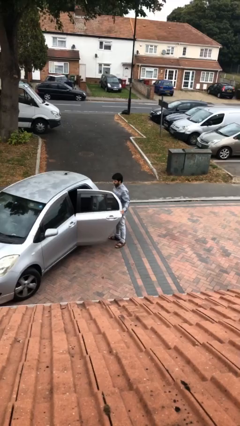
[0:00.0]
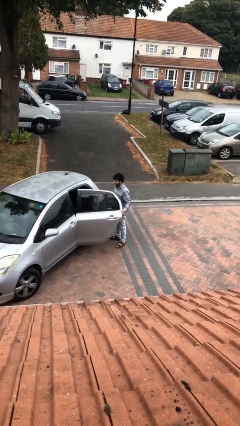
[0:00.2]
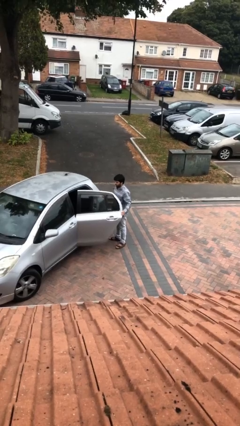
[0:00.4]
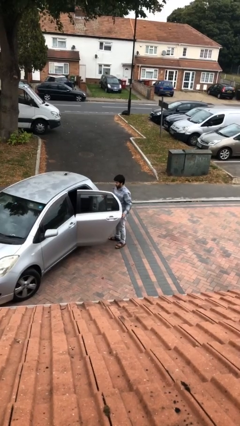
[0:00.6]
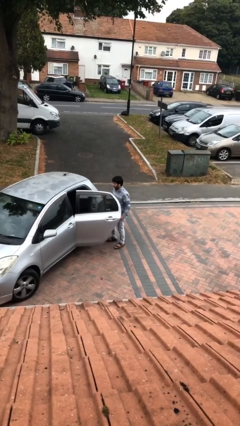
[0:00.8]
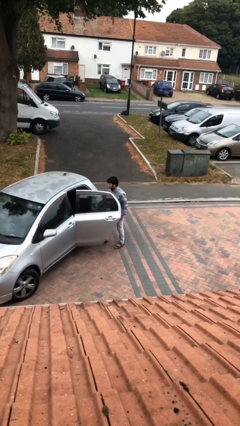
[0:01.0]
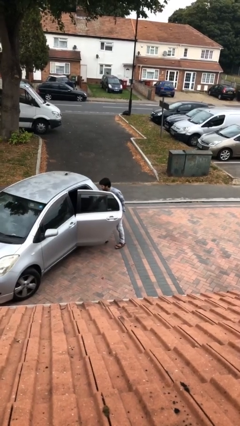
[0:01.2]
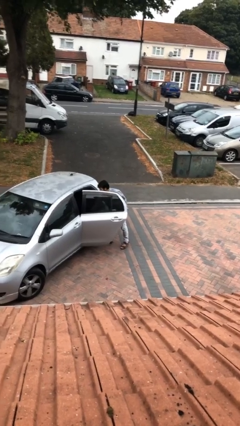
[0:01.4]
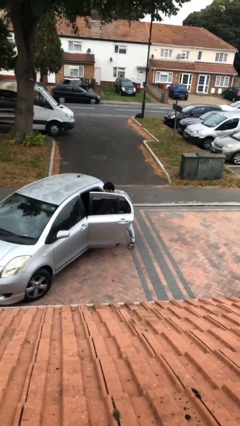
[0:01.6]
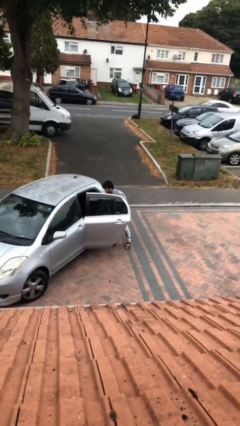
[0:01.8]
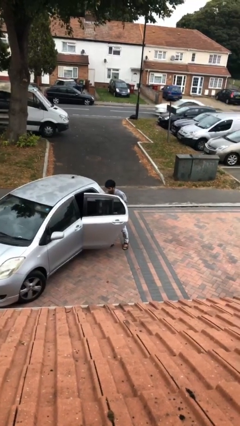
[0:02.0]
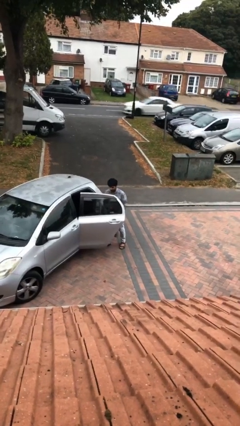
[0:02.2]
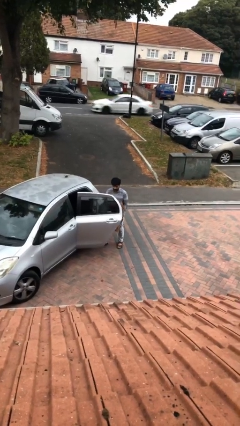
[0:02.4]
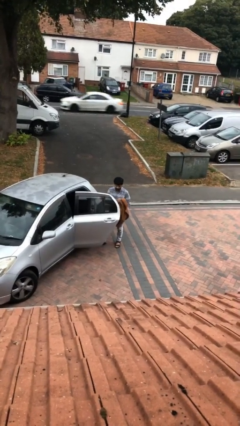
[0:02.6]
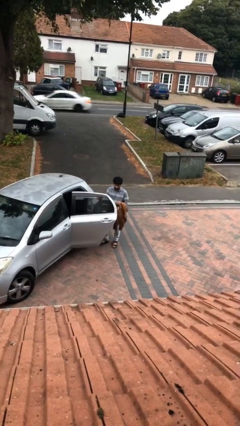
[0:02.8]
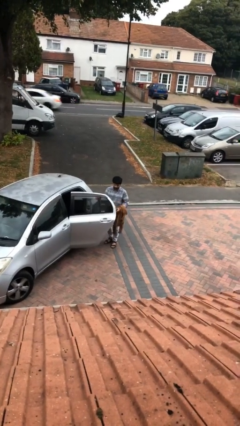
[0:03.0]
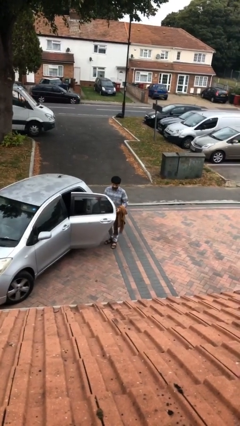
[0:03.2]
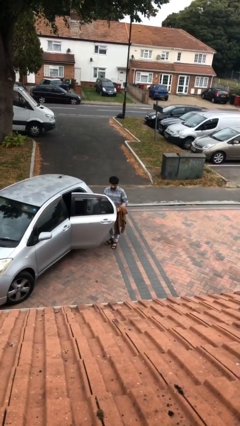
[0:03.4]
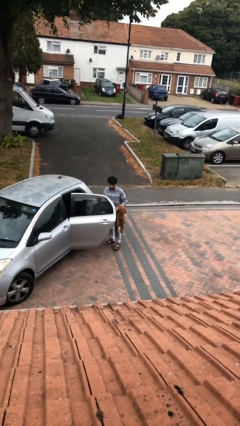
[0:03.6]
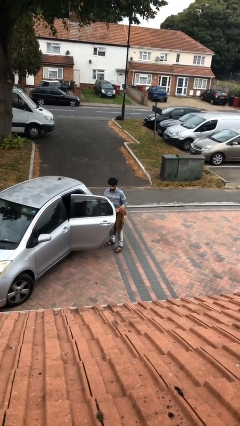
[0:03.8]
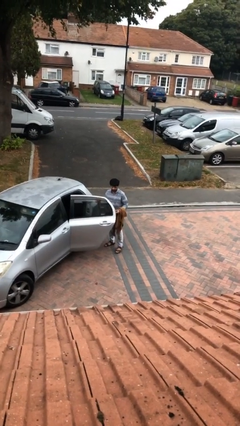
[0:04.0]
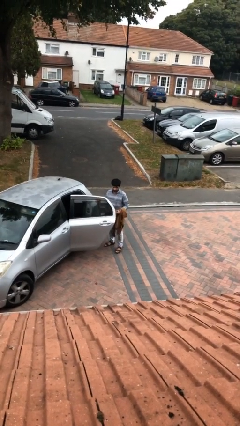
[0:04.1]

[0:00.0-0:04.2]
person unloads car

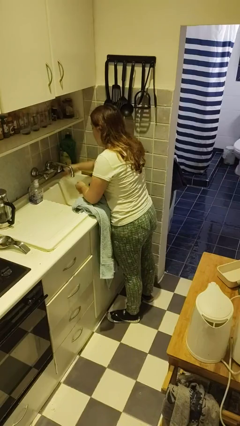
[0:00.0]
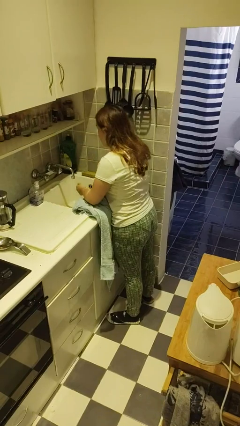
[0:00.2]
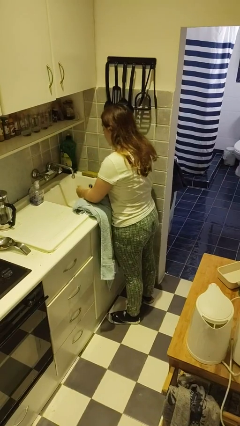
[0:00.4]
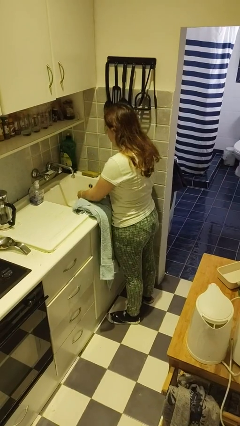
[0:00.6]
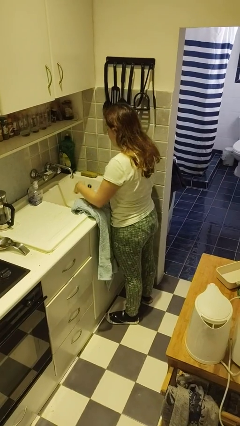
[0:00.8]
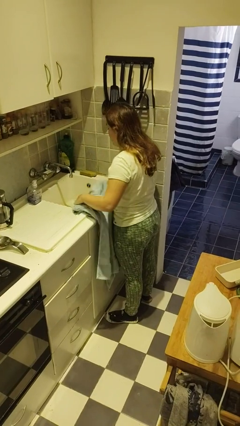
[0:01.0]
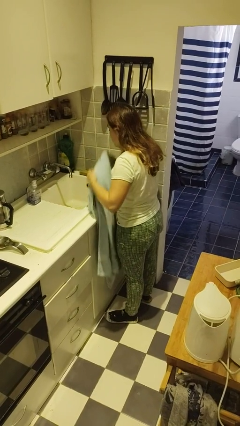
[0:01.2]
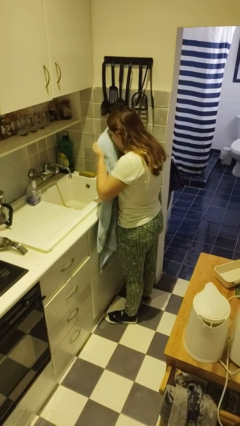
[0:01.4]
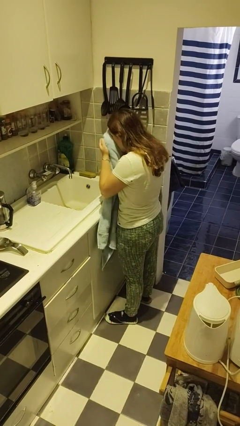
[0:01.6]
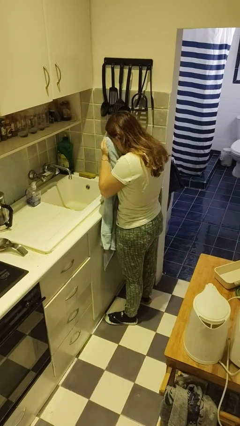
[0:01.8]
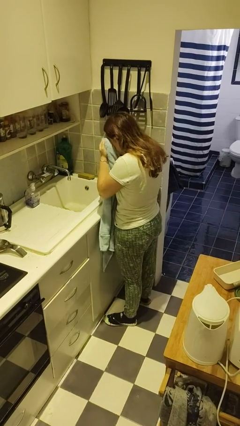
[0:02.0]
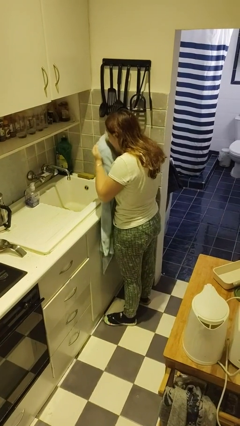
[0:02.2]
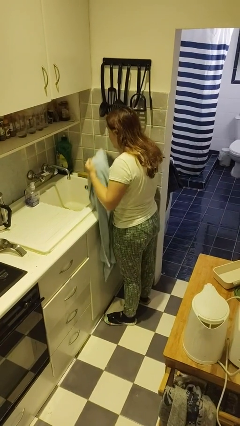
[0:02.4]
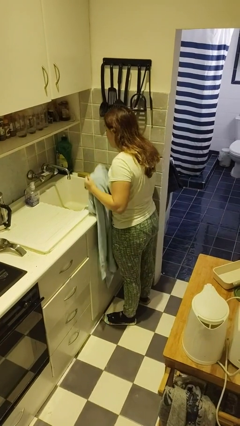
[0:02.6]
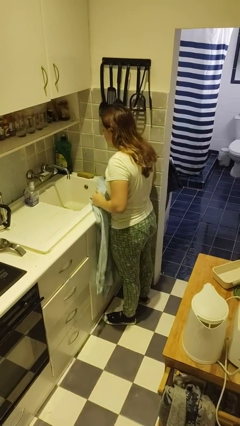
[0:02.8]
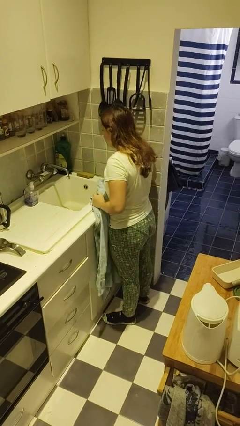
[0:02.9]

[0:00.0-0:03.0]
person dries face with towel

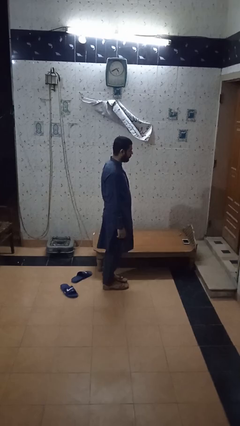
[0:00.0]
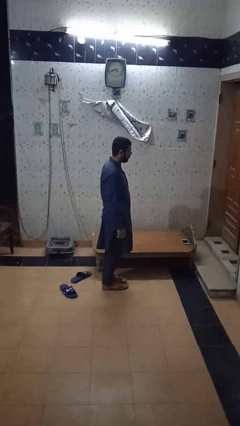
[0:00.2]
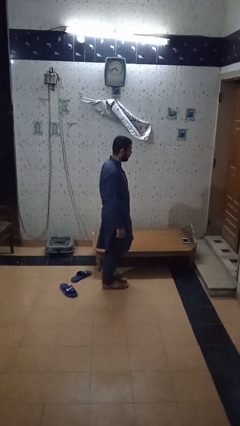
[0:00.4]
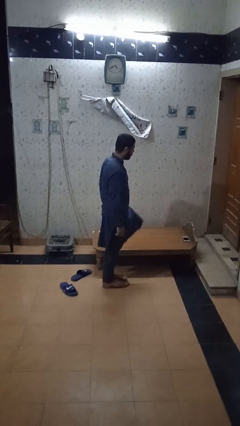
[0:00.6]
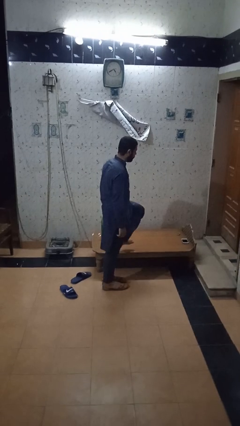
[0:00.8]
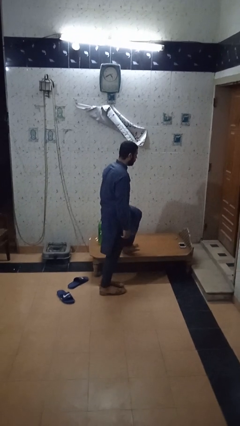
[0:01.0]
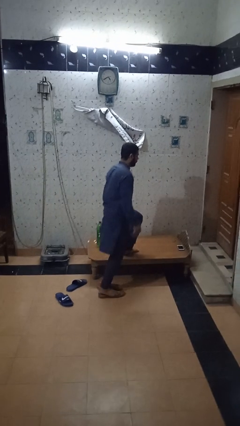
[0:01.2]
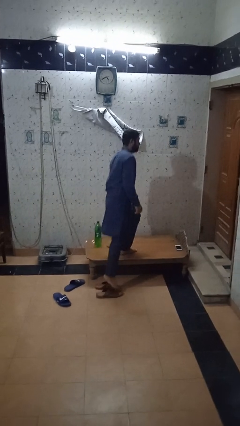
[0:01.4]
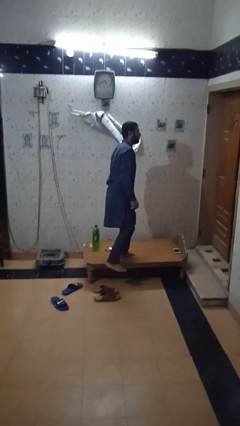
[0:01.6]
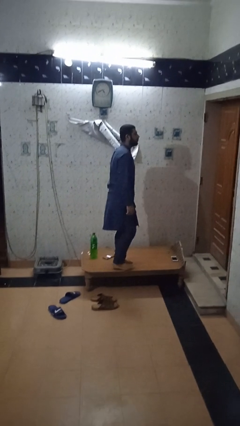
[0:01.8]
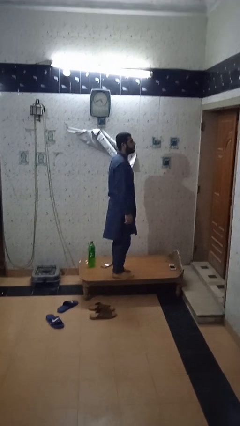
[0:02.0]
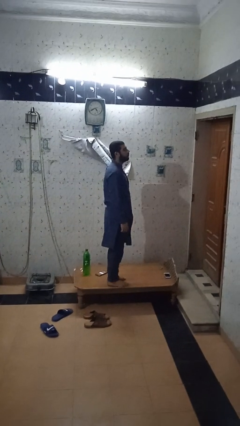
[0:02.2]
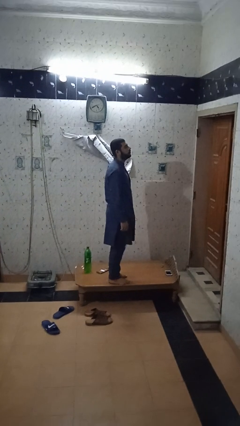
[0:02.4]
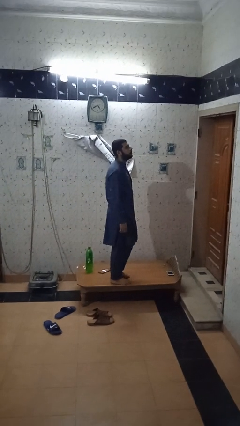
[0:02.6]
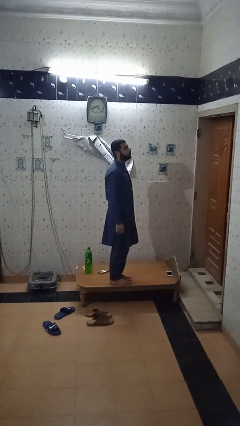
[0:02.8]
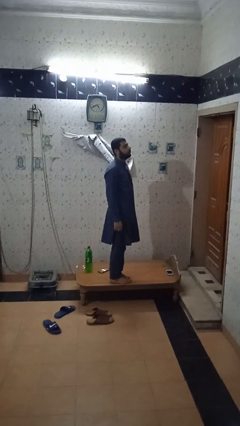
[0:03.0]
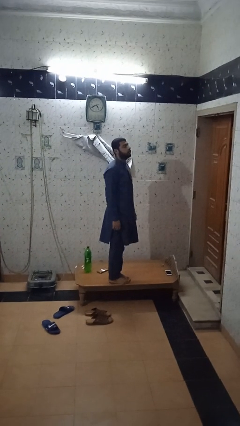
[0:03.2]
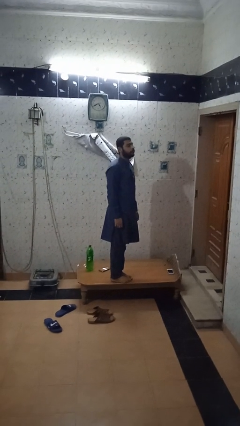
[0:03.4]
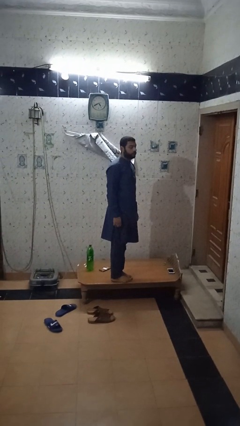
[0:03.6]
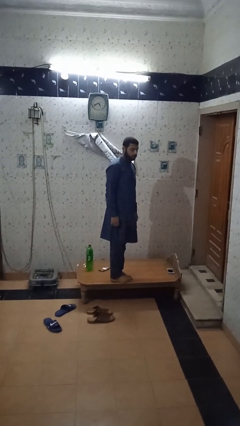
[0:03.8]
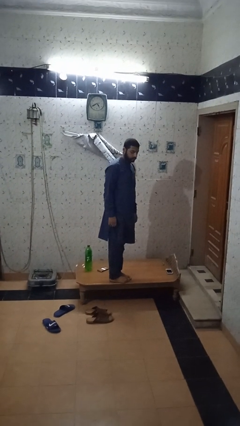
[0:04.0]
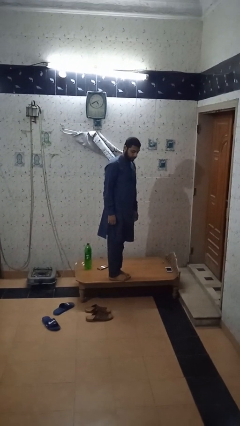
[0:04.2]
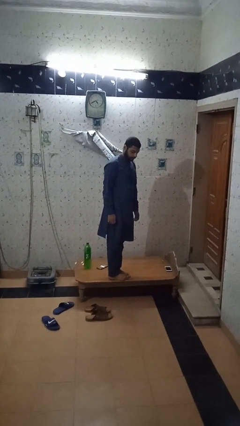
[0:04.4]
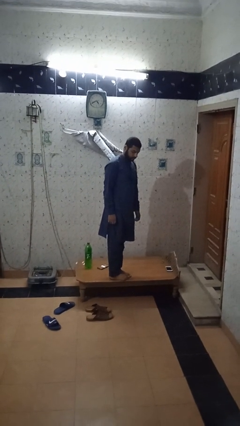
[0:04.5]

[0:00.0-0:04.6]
person climbs on table

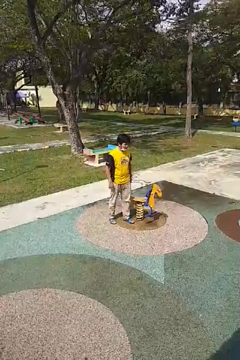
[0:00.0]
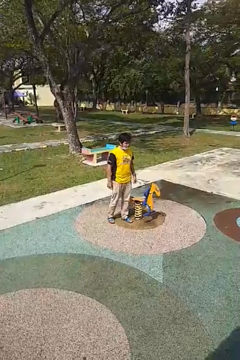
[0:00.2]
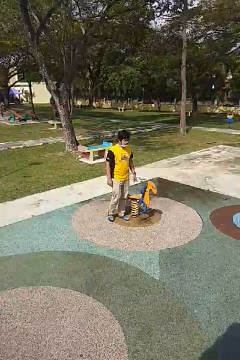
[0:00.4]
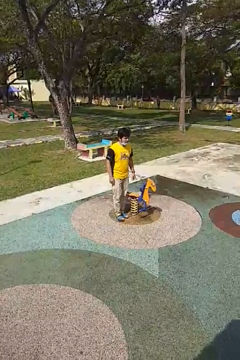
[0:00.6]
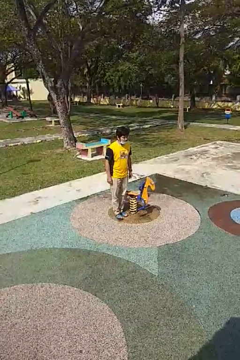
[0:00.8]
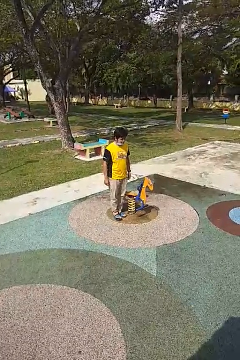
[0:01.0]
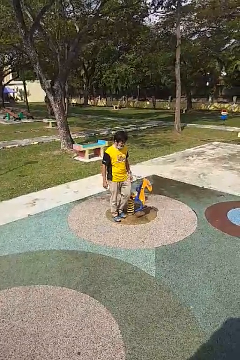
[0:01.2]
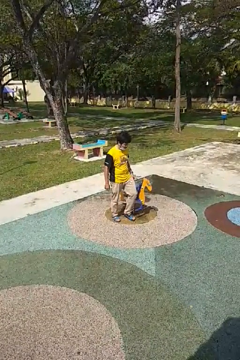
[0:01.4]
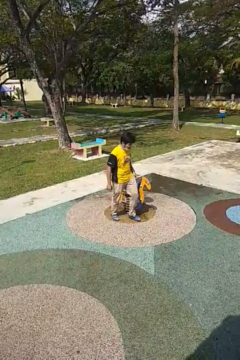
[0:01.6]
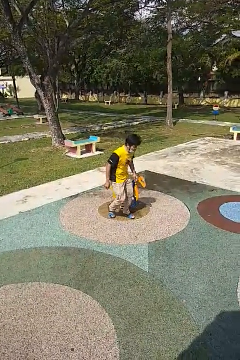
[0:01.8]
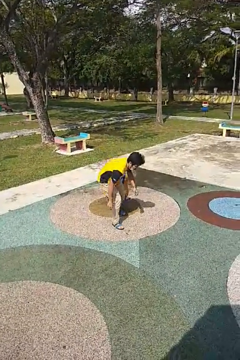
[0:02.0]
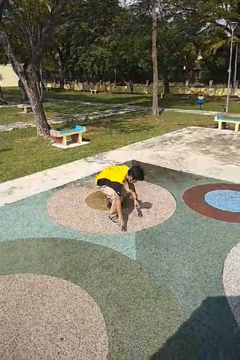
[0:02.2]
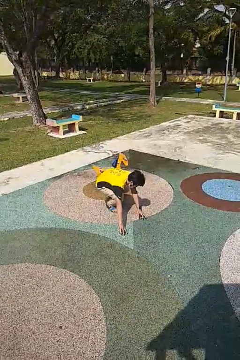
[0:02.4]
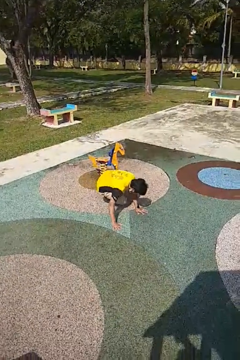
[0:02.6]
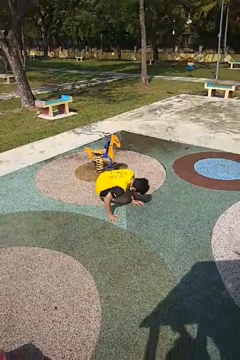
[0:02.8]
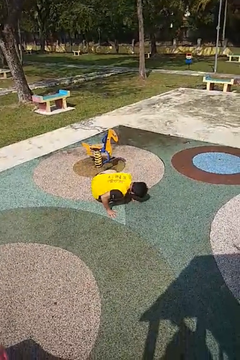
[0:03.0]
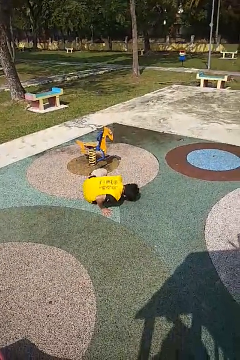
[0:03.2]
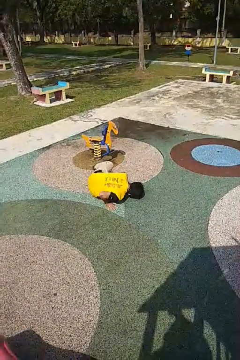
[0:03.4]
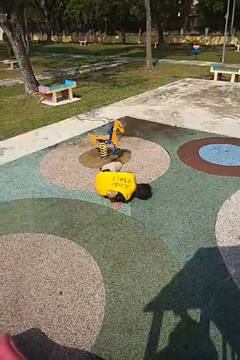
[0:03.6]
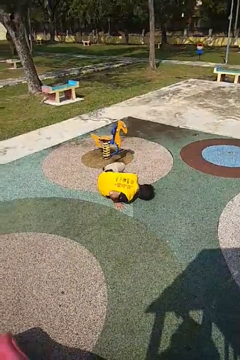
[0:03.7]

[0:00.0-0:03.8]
person trips on object on floor

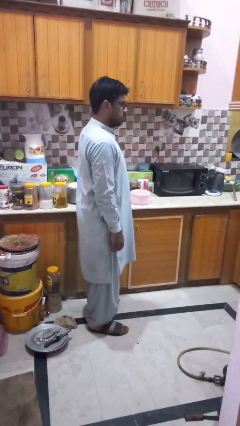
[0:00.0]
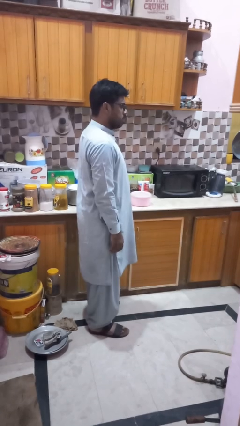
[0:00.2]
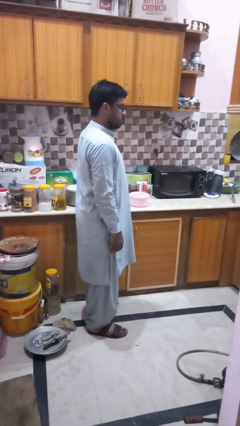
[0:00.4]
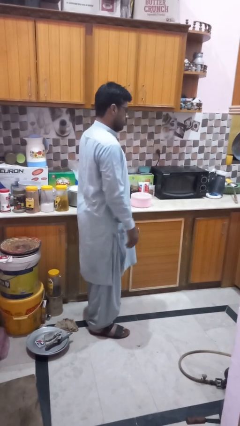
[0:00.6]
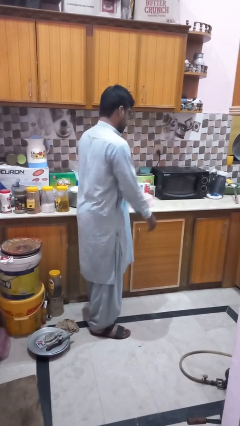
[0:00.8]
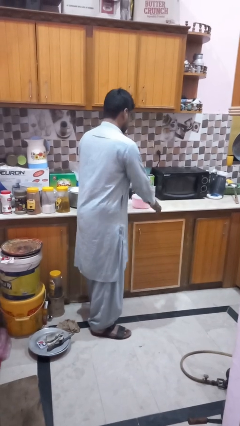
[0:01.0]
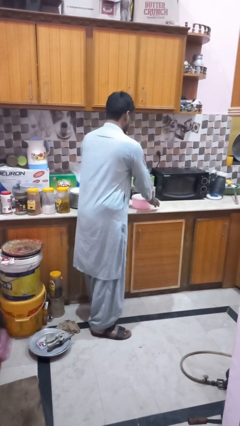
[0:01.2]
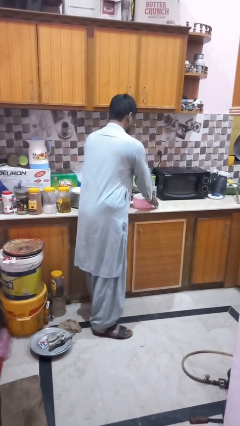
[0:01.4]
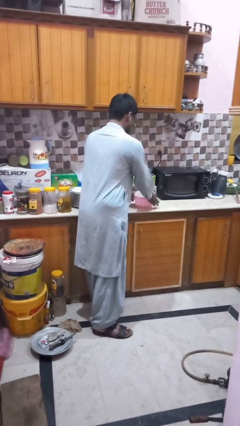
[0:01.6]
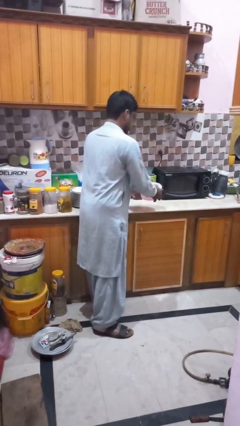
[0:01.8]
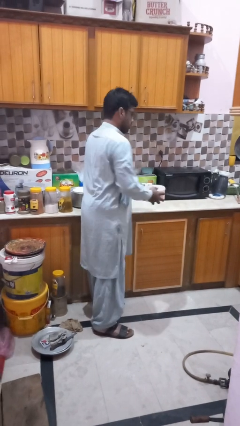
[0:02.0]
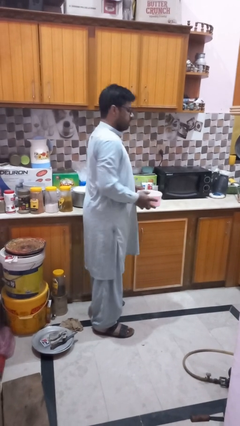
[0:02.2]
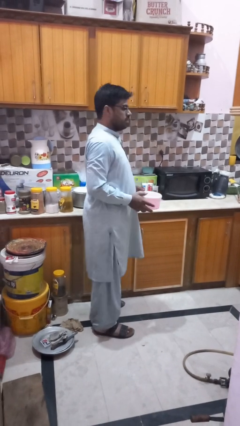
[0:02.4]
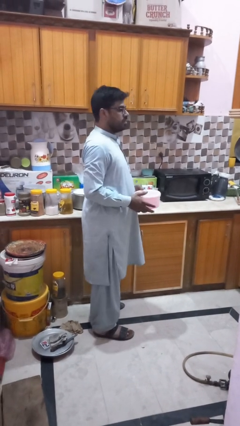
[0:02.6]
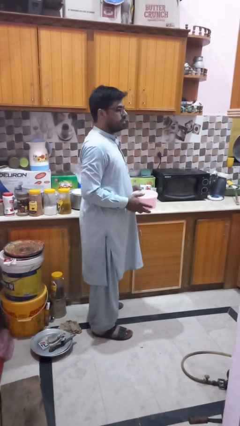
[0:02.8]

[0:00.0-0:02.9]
person picks up object from countertop
